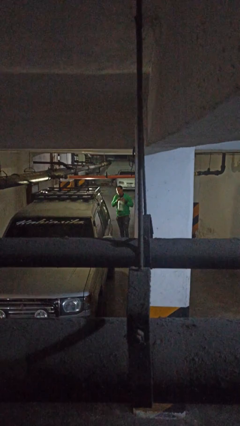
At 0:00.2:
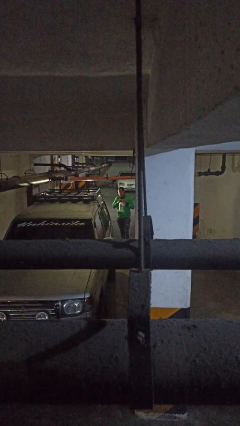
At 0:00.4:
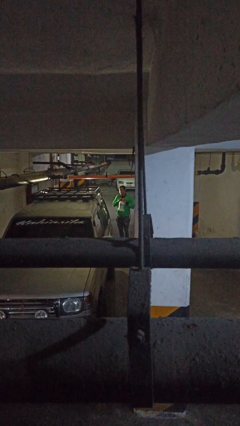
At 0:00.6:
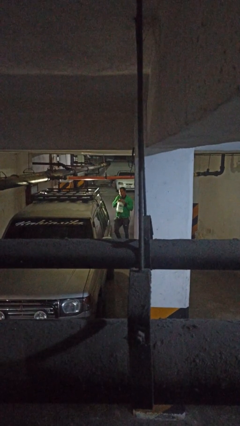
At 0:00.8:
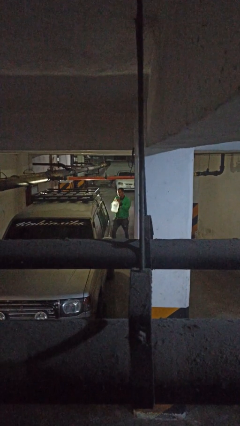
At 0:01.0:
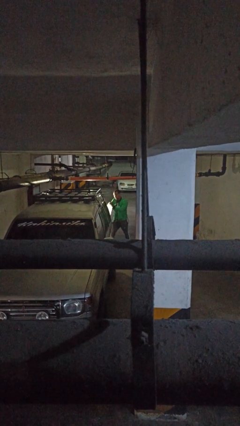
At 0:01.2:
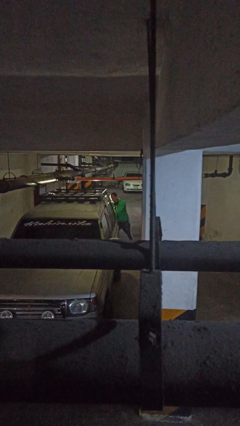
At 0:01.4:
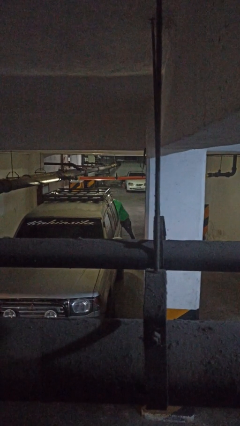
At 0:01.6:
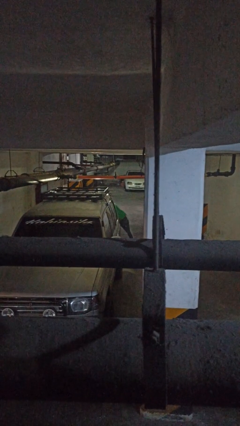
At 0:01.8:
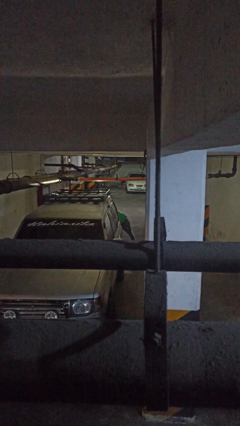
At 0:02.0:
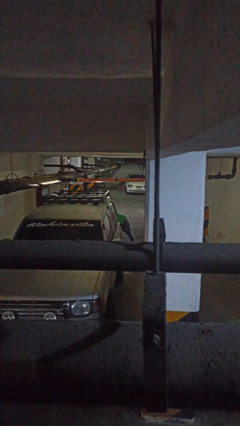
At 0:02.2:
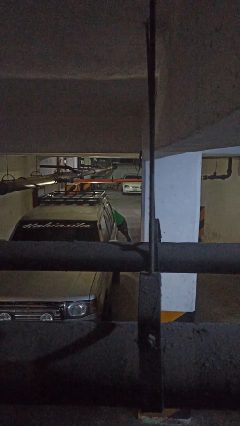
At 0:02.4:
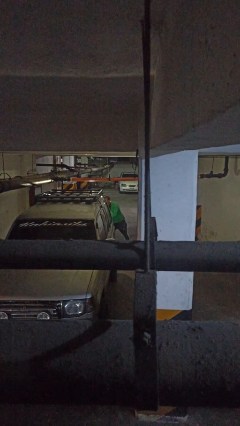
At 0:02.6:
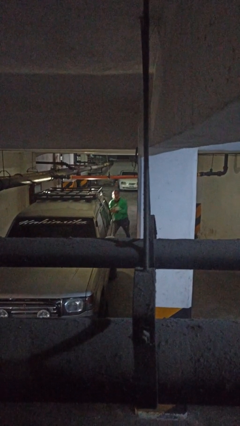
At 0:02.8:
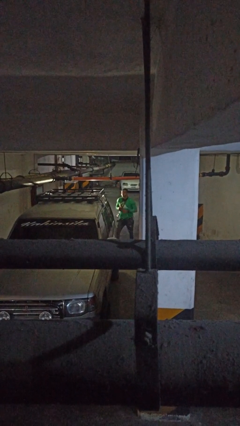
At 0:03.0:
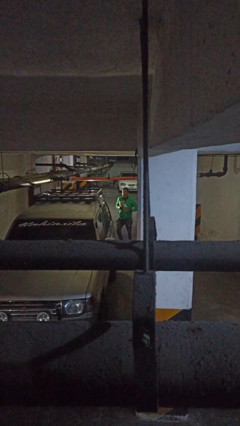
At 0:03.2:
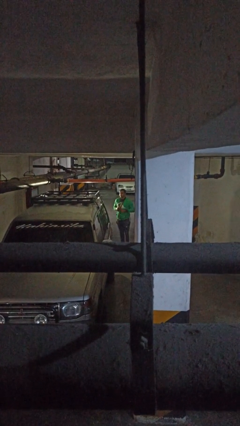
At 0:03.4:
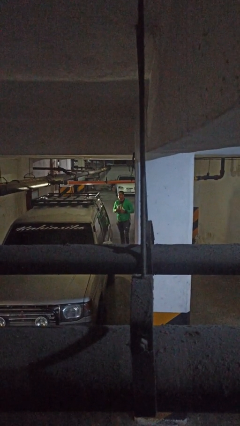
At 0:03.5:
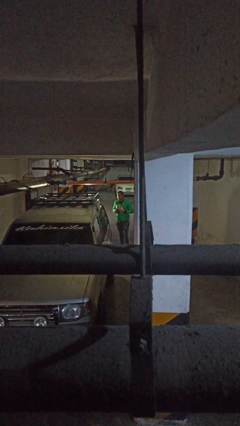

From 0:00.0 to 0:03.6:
person loads car

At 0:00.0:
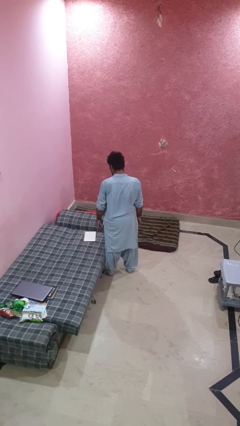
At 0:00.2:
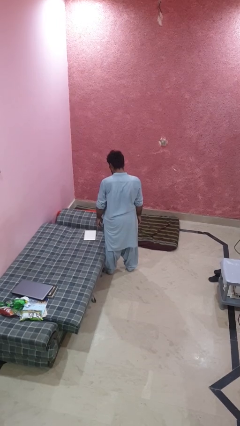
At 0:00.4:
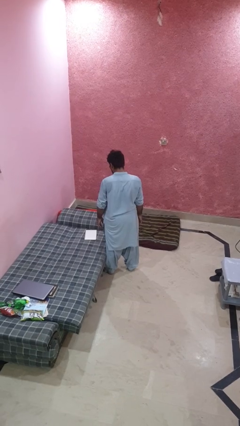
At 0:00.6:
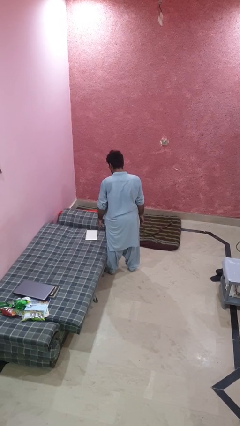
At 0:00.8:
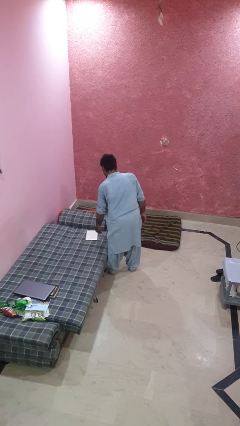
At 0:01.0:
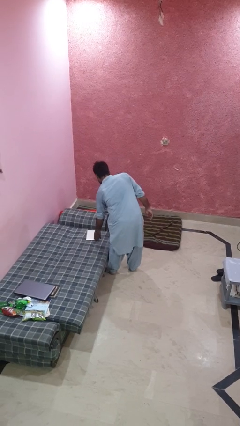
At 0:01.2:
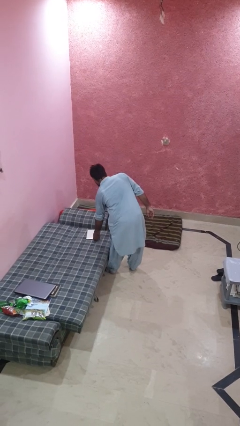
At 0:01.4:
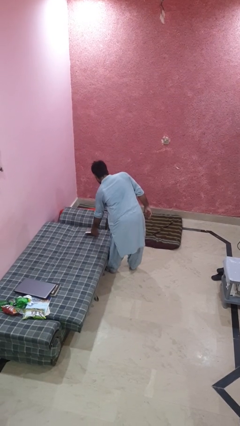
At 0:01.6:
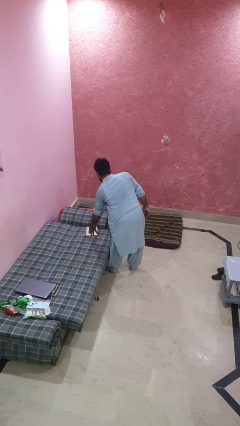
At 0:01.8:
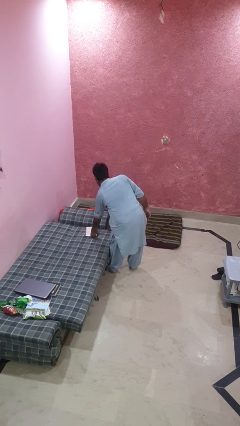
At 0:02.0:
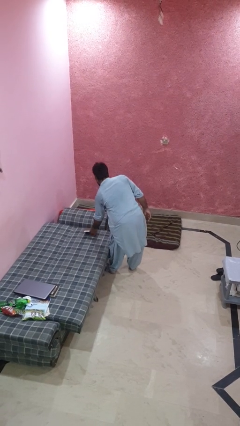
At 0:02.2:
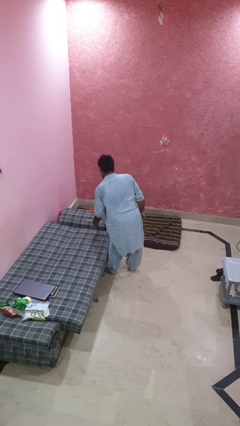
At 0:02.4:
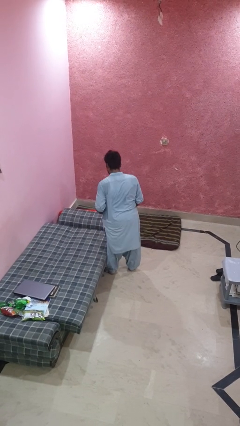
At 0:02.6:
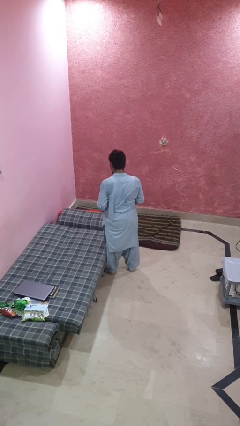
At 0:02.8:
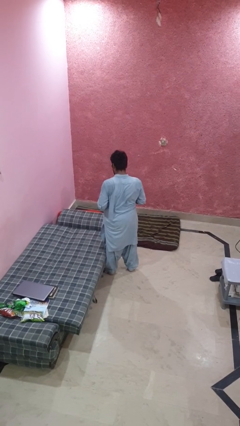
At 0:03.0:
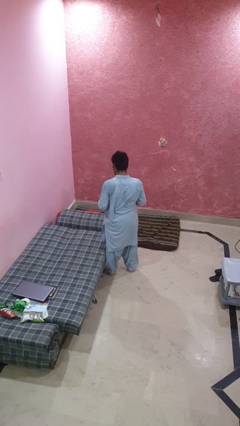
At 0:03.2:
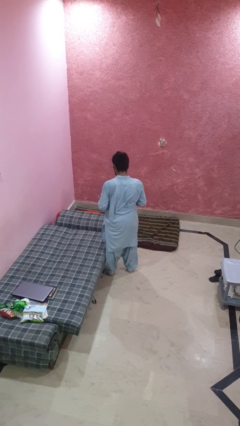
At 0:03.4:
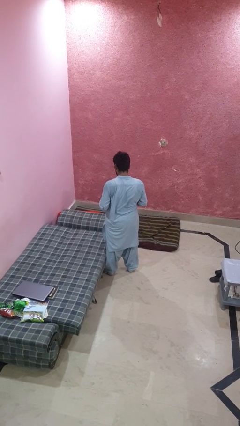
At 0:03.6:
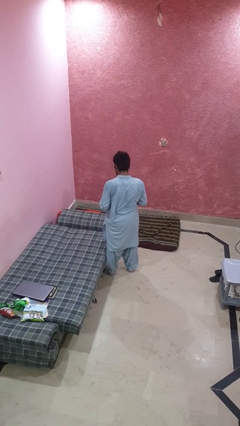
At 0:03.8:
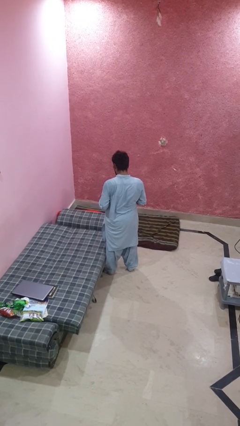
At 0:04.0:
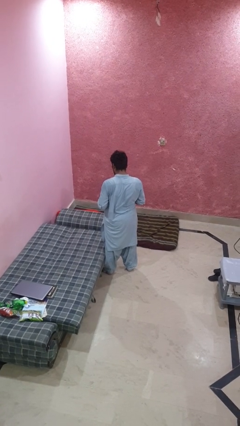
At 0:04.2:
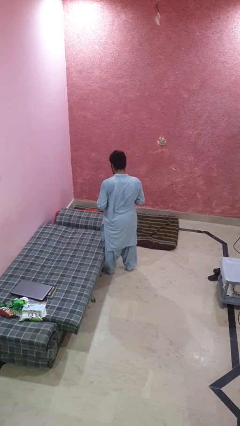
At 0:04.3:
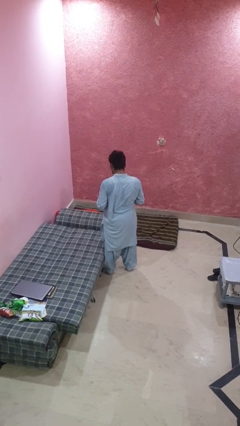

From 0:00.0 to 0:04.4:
person picks up object from bed

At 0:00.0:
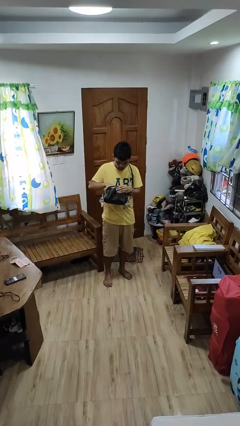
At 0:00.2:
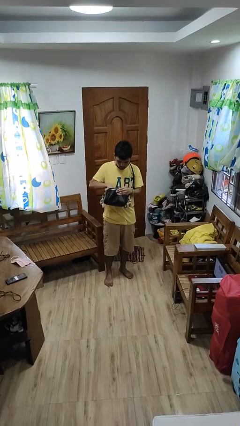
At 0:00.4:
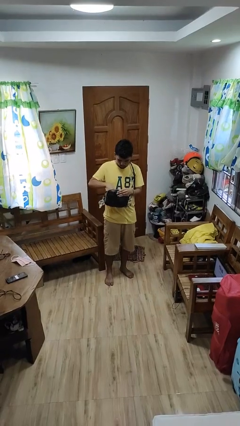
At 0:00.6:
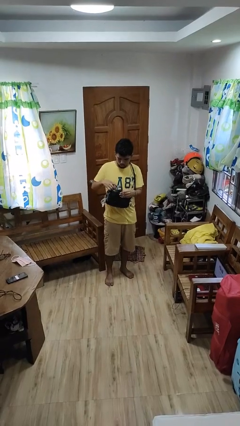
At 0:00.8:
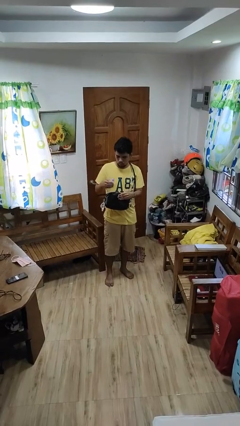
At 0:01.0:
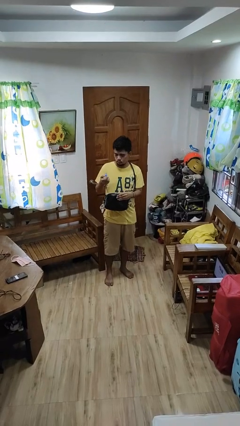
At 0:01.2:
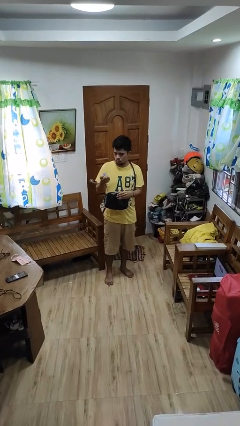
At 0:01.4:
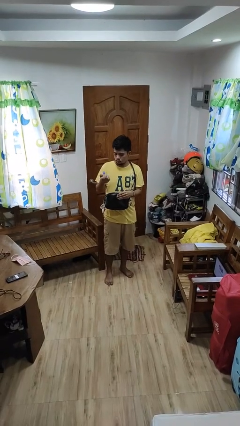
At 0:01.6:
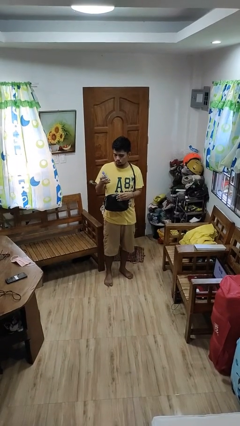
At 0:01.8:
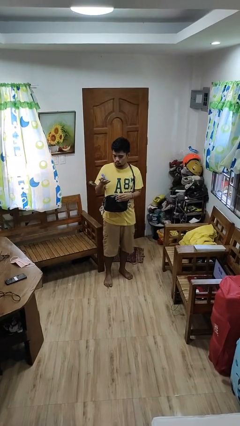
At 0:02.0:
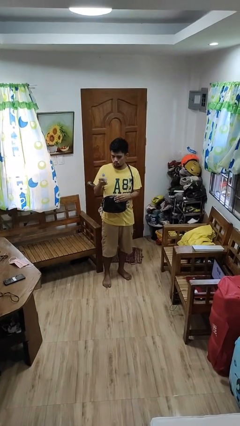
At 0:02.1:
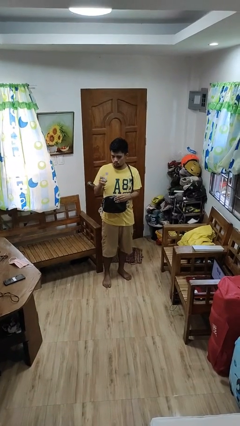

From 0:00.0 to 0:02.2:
person takes object from purse

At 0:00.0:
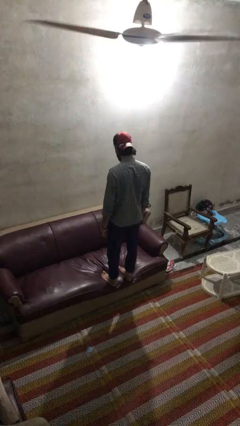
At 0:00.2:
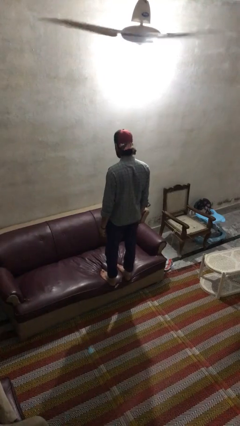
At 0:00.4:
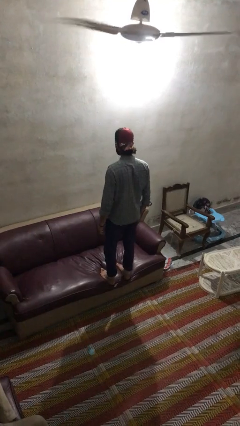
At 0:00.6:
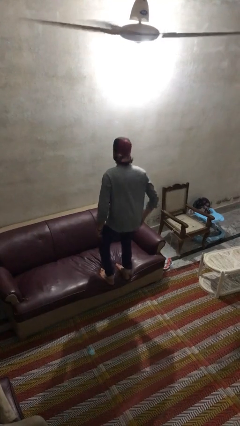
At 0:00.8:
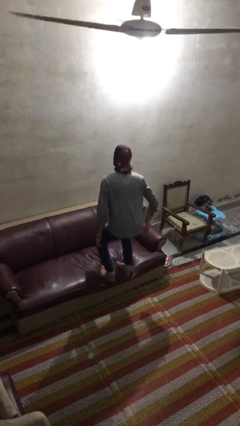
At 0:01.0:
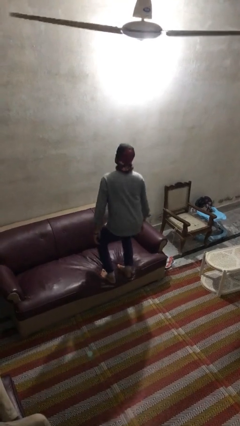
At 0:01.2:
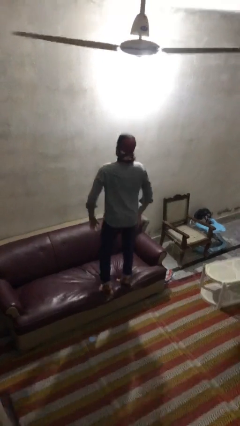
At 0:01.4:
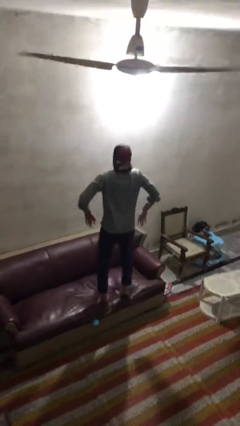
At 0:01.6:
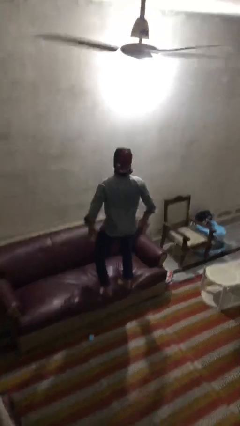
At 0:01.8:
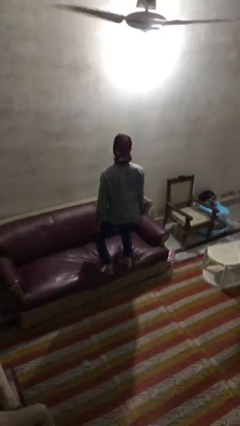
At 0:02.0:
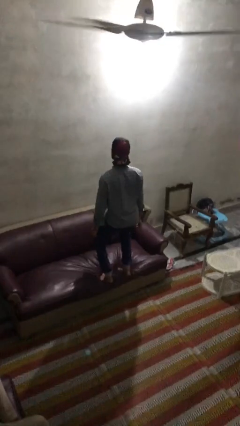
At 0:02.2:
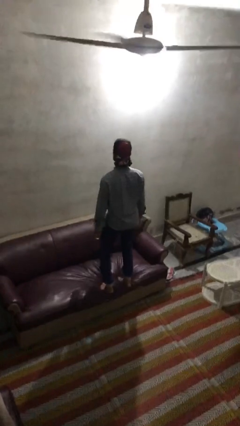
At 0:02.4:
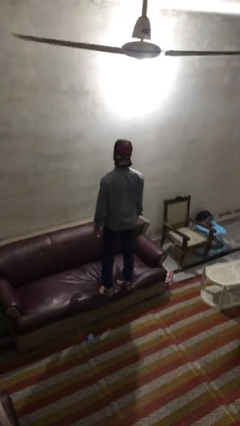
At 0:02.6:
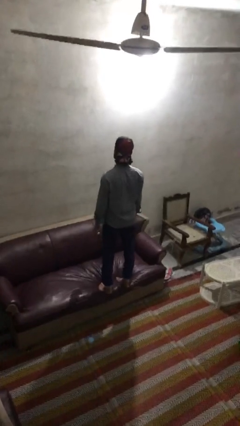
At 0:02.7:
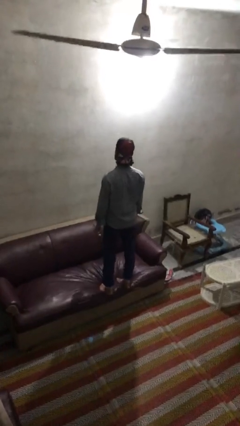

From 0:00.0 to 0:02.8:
person jumps on couch

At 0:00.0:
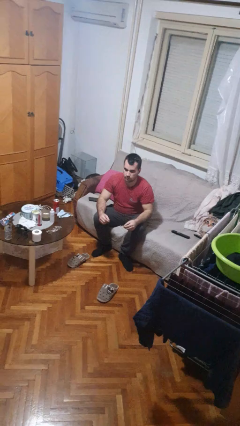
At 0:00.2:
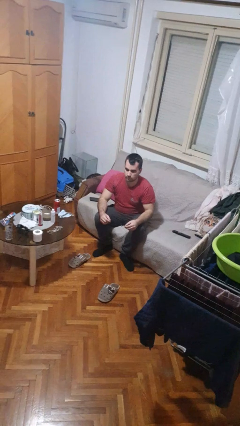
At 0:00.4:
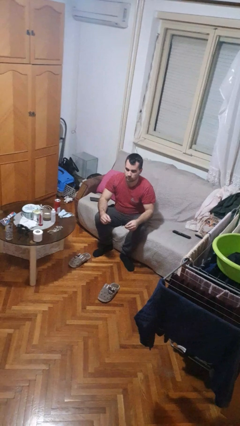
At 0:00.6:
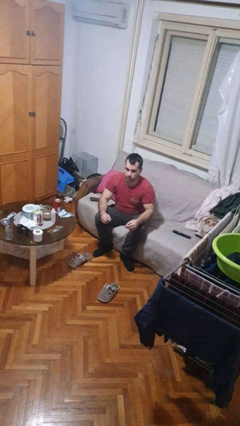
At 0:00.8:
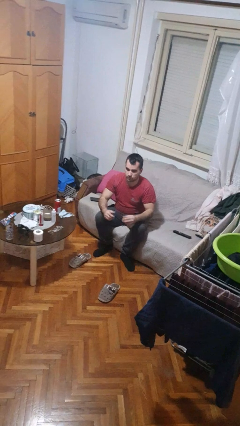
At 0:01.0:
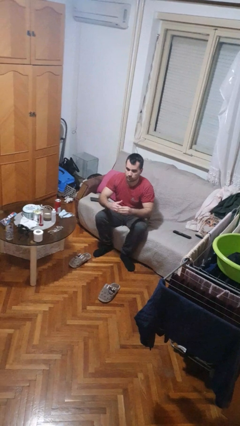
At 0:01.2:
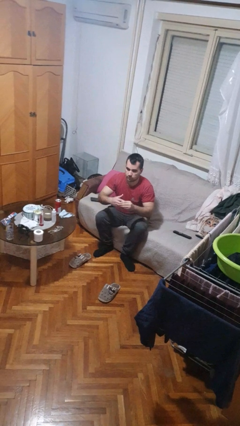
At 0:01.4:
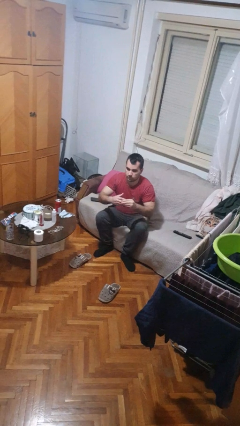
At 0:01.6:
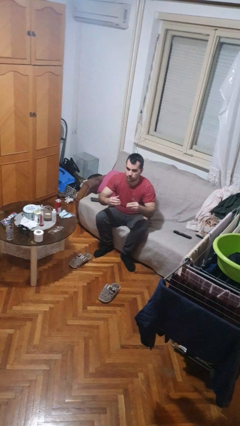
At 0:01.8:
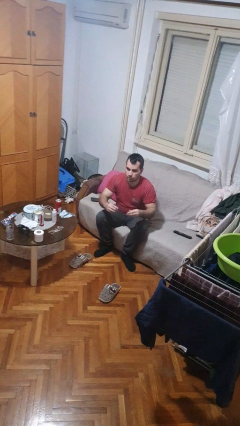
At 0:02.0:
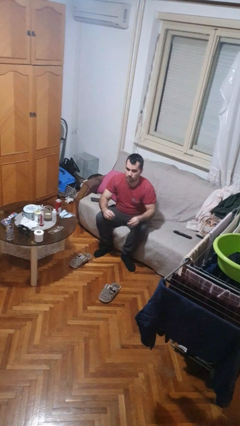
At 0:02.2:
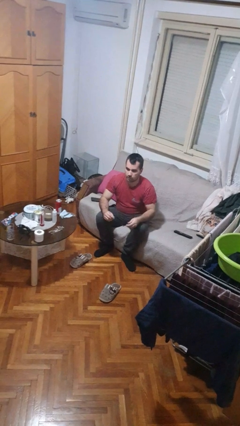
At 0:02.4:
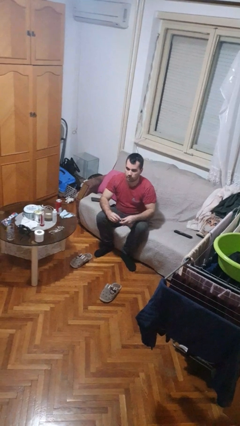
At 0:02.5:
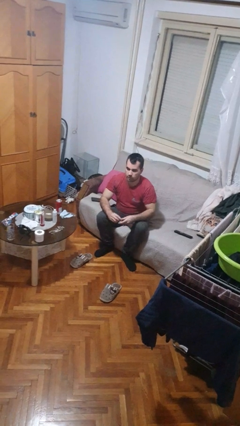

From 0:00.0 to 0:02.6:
person takes off ring

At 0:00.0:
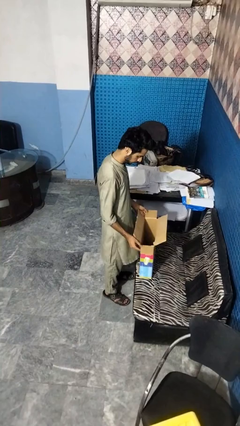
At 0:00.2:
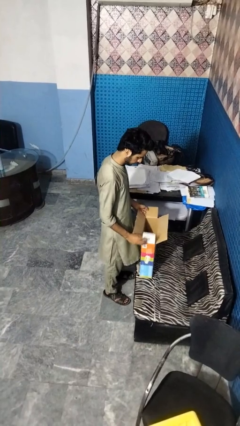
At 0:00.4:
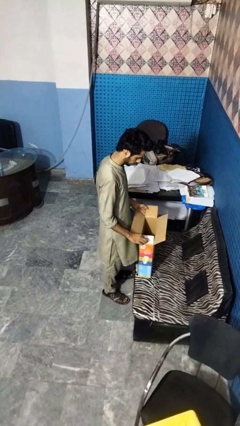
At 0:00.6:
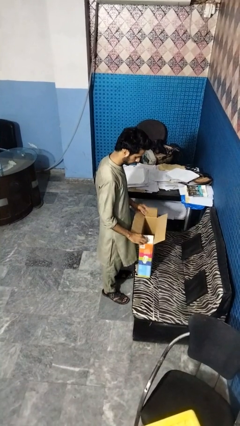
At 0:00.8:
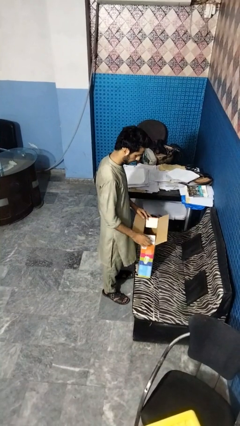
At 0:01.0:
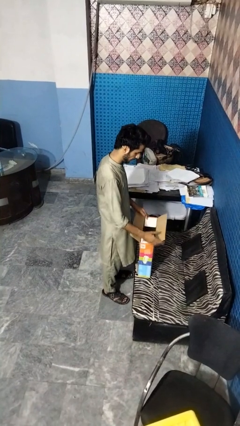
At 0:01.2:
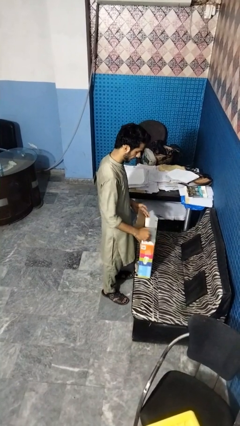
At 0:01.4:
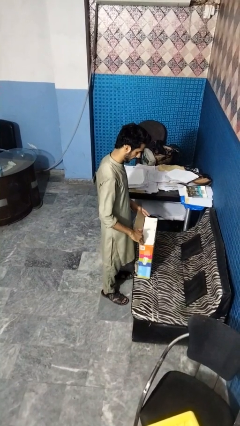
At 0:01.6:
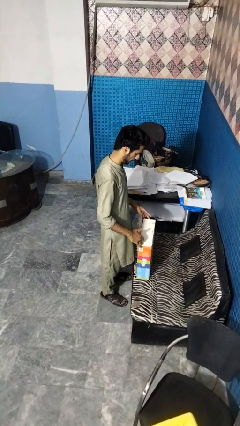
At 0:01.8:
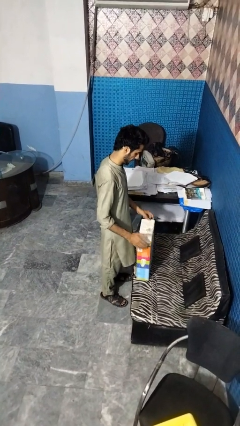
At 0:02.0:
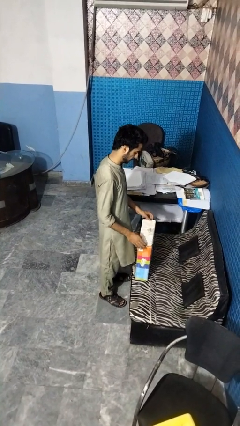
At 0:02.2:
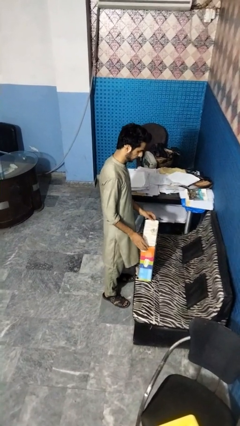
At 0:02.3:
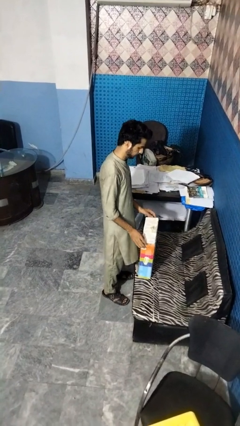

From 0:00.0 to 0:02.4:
person closes box
